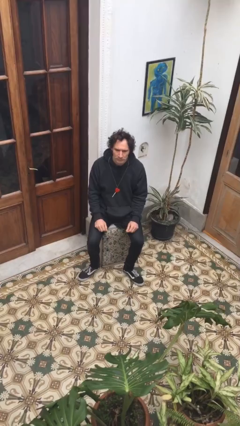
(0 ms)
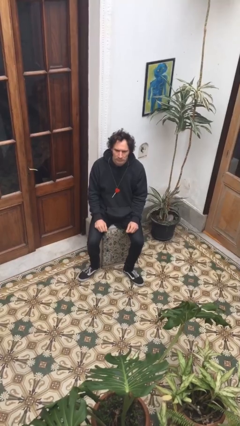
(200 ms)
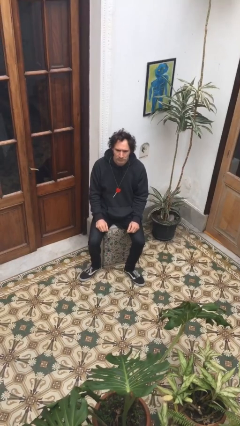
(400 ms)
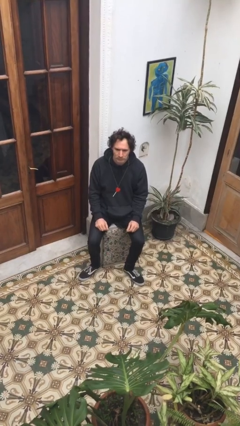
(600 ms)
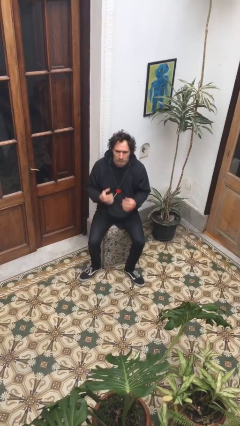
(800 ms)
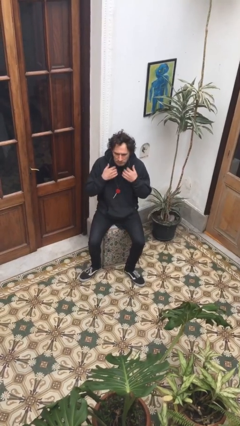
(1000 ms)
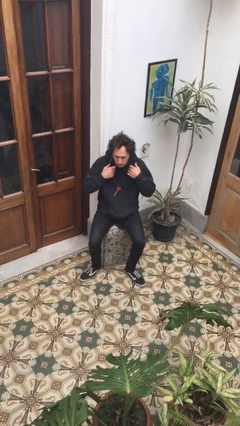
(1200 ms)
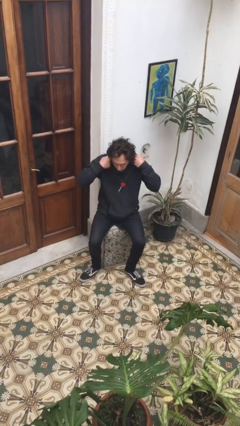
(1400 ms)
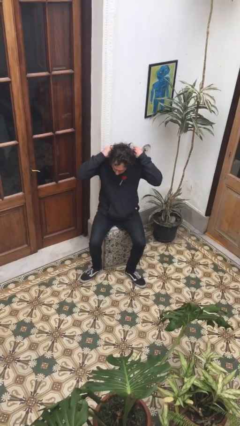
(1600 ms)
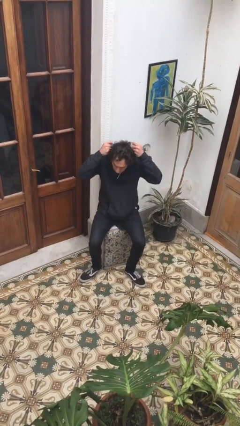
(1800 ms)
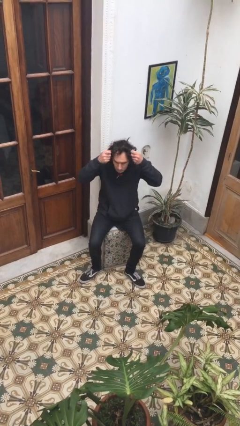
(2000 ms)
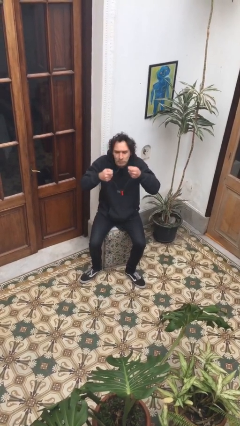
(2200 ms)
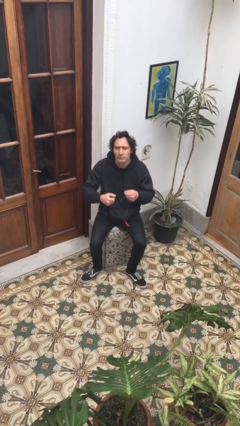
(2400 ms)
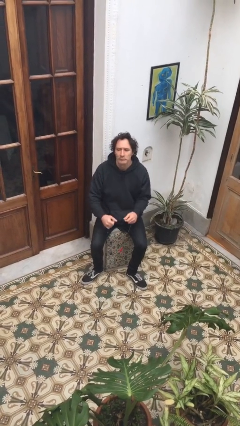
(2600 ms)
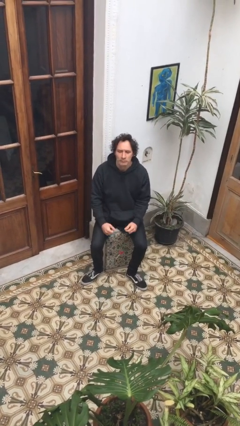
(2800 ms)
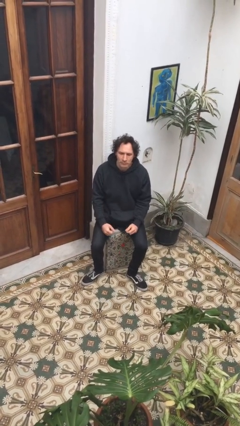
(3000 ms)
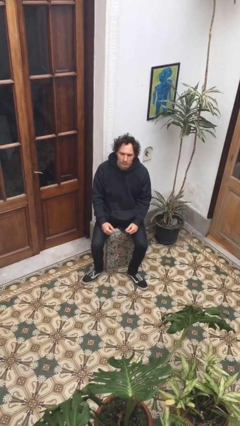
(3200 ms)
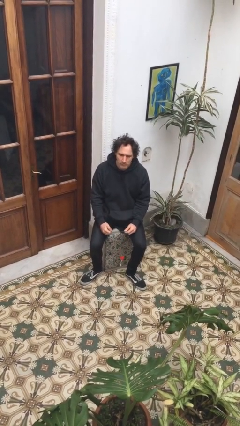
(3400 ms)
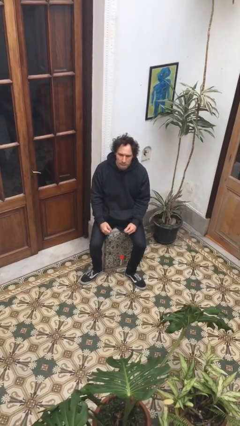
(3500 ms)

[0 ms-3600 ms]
person takes off necklace

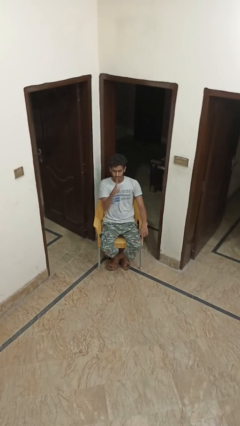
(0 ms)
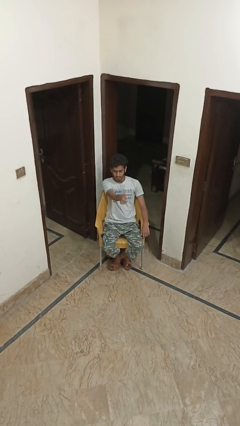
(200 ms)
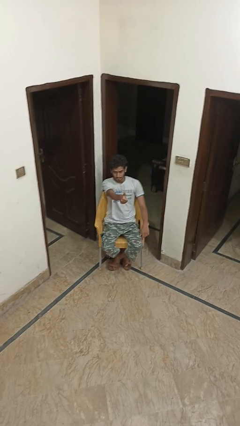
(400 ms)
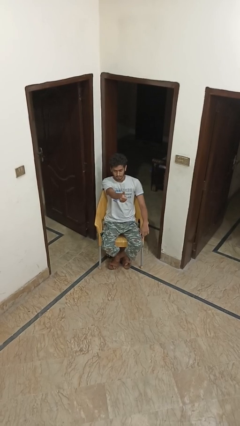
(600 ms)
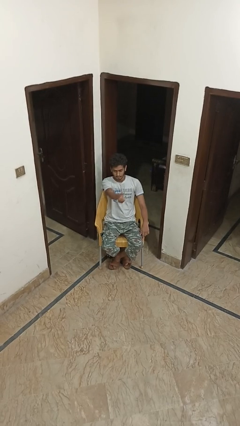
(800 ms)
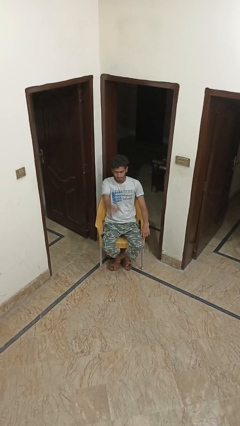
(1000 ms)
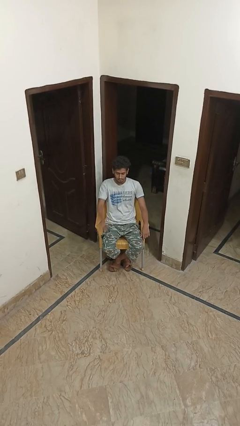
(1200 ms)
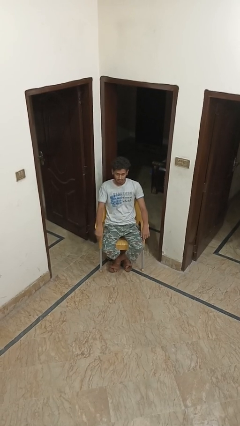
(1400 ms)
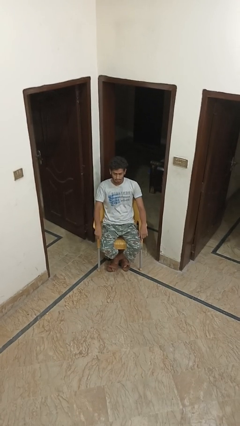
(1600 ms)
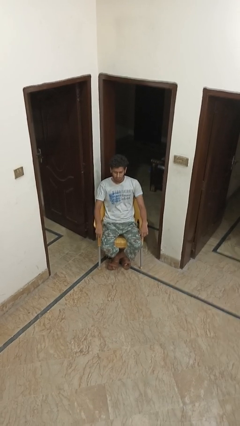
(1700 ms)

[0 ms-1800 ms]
person gestures thumbs up

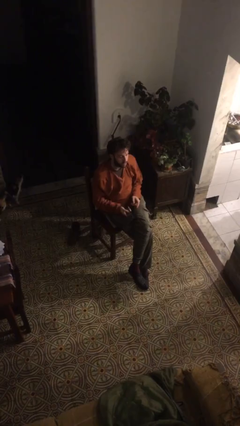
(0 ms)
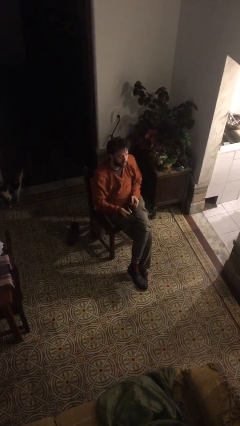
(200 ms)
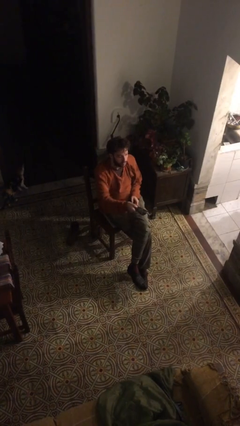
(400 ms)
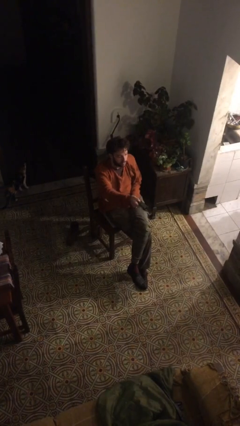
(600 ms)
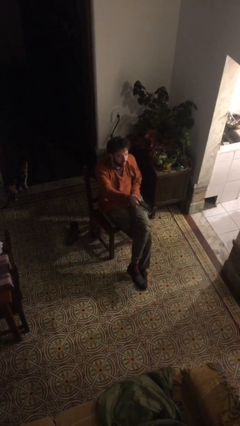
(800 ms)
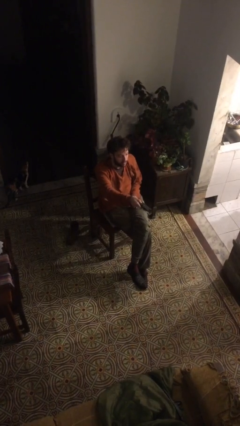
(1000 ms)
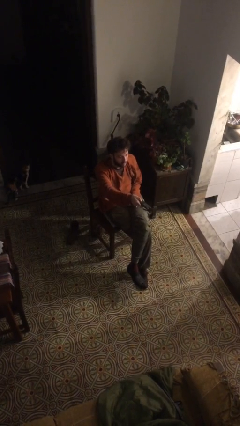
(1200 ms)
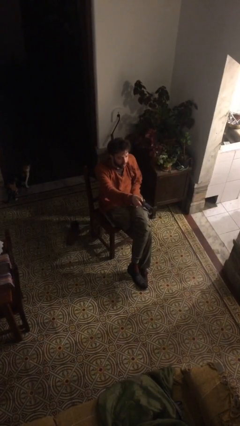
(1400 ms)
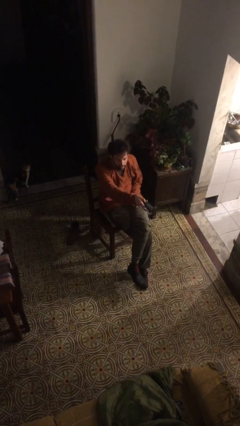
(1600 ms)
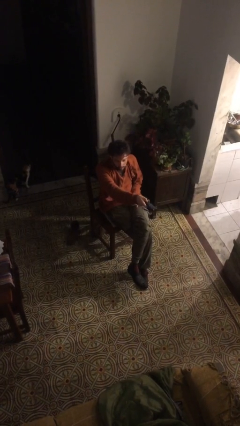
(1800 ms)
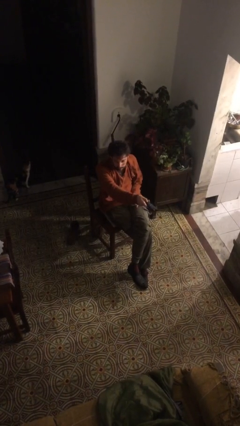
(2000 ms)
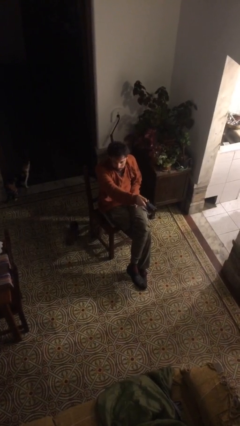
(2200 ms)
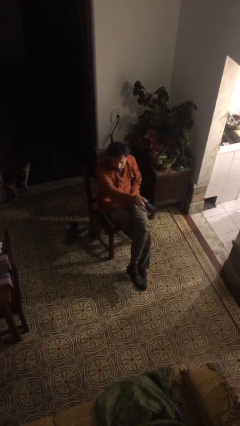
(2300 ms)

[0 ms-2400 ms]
person uses television remote

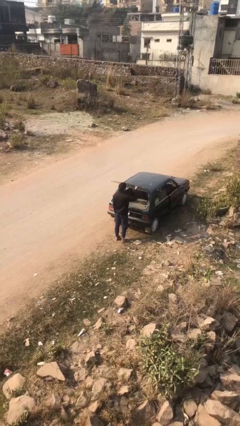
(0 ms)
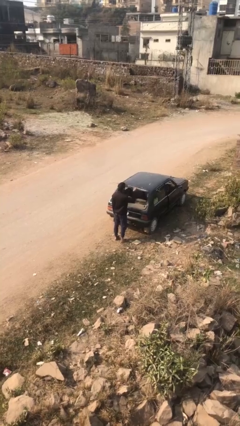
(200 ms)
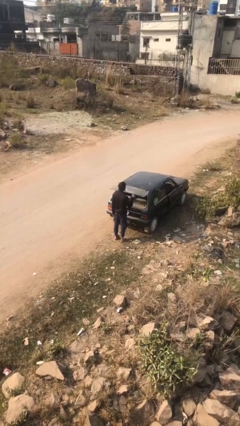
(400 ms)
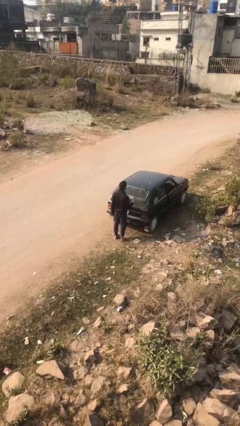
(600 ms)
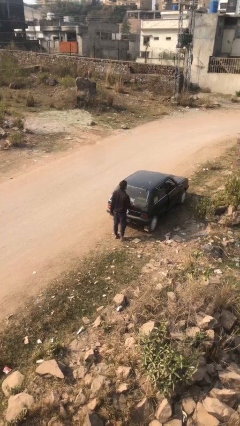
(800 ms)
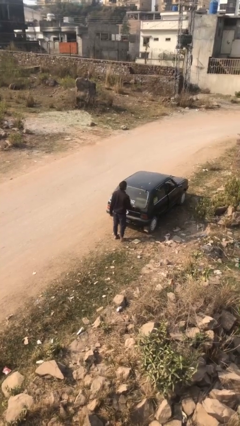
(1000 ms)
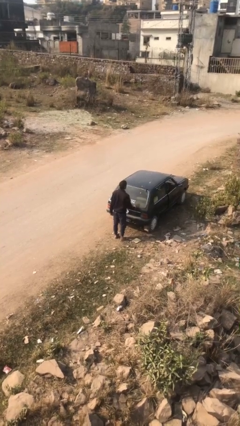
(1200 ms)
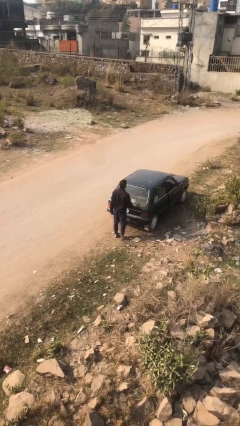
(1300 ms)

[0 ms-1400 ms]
person closes car trunk

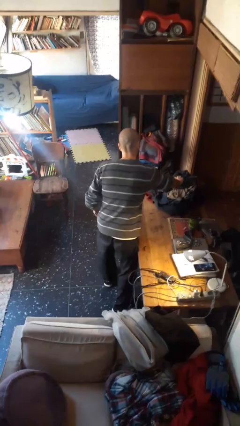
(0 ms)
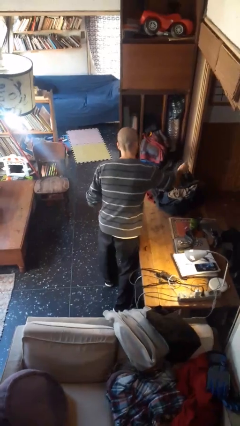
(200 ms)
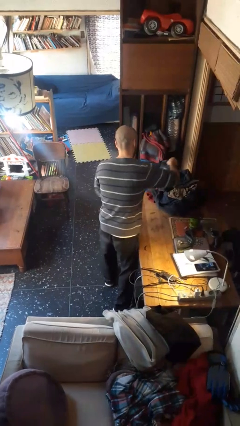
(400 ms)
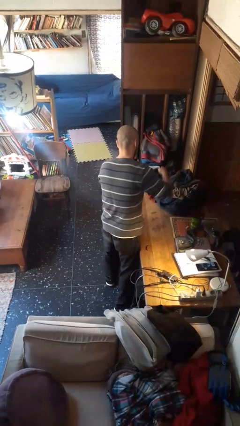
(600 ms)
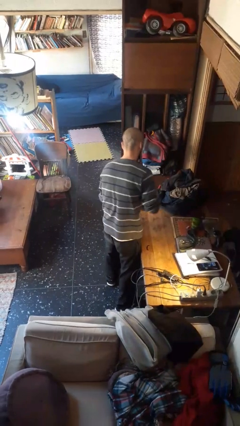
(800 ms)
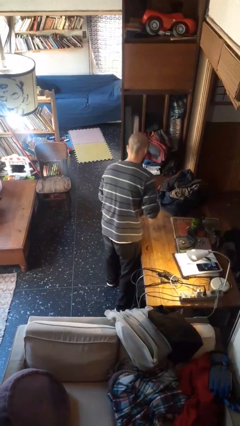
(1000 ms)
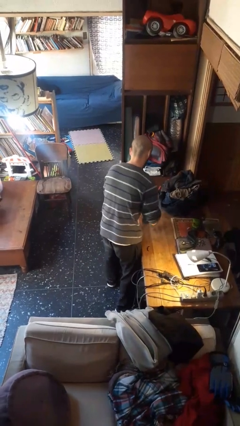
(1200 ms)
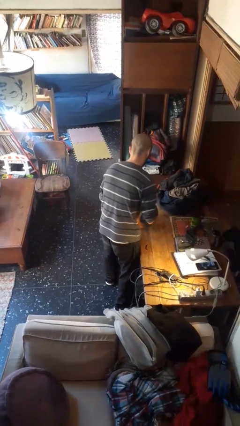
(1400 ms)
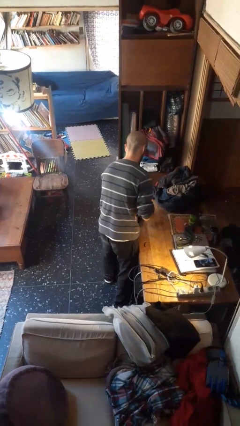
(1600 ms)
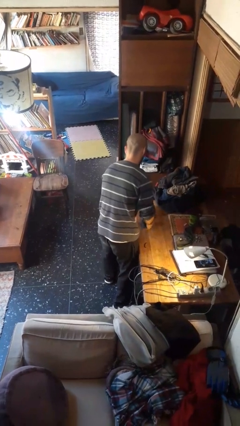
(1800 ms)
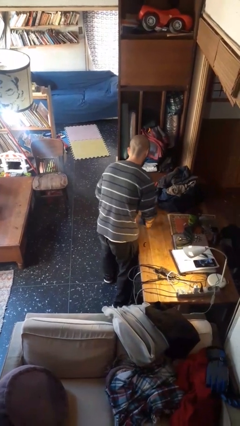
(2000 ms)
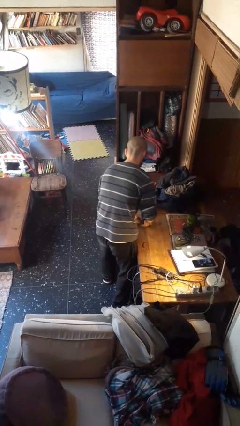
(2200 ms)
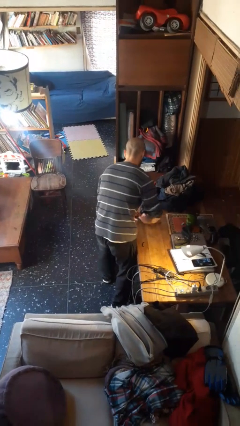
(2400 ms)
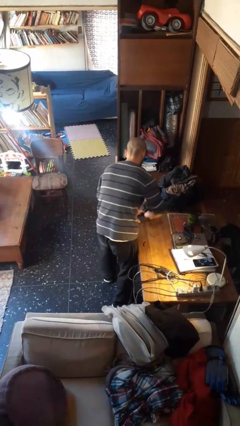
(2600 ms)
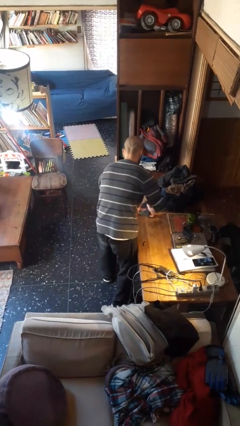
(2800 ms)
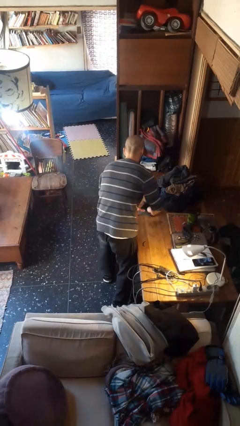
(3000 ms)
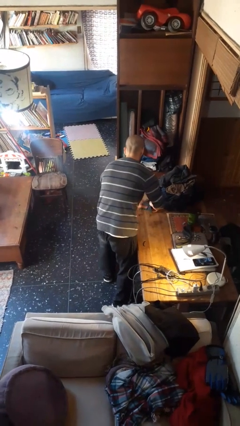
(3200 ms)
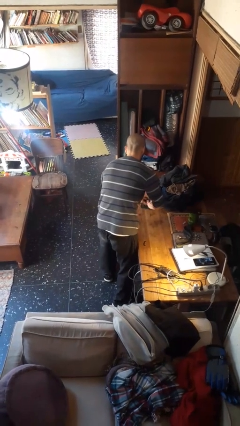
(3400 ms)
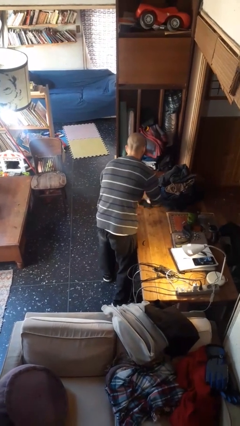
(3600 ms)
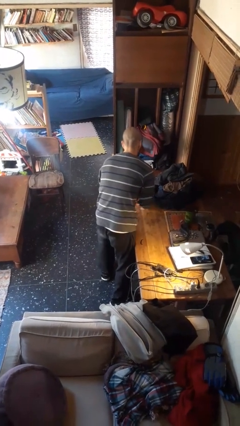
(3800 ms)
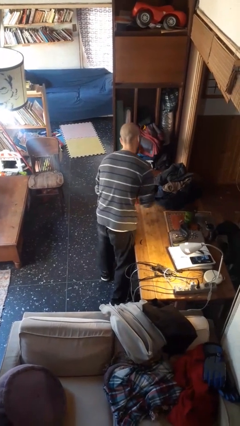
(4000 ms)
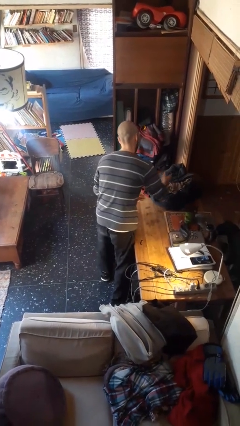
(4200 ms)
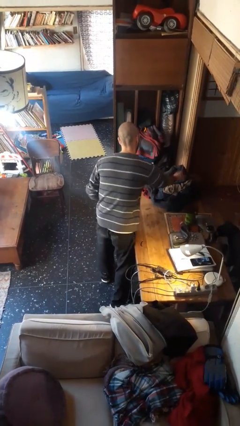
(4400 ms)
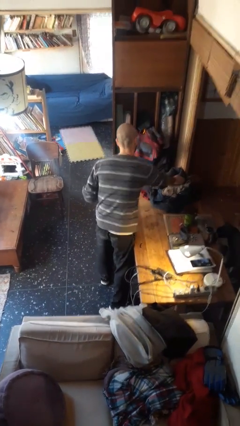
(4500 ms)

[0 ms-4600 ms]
person folds socks

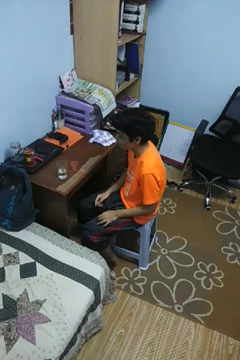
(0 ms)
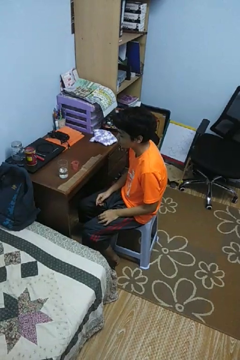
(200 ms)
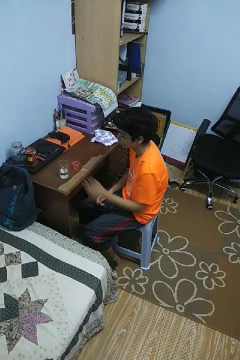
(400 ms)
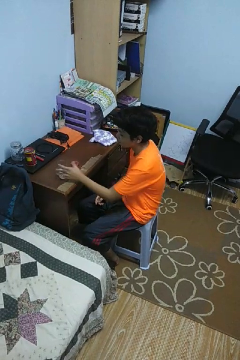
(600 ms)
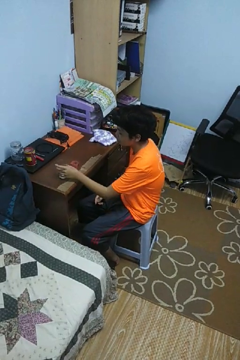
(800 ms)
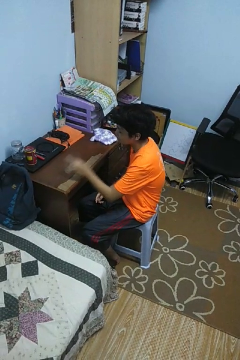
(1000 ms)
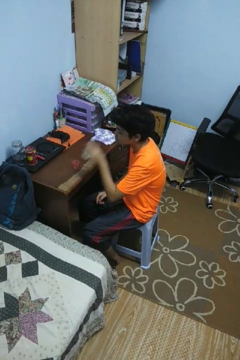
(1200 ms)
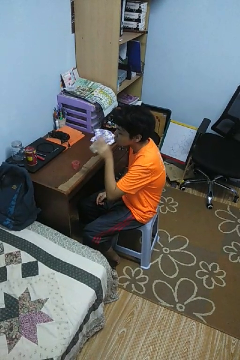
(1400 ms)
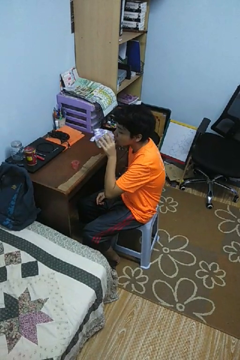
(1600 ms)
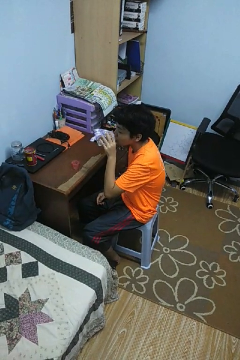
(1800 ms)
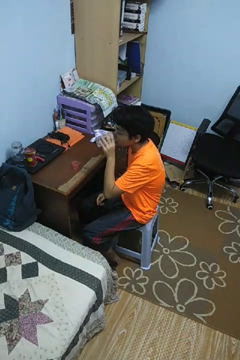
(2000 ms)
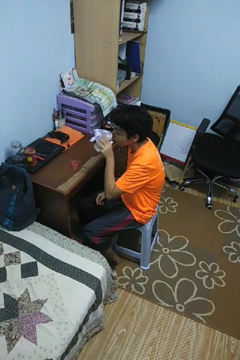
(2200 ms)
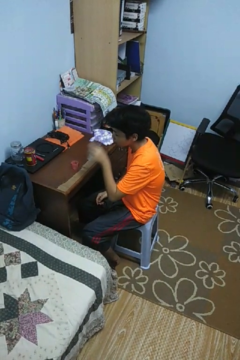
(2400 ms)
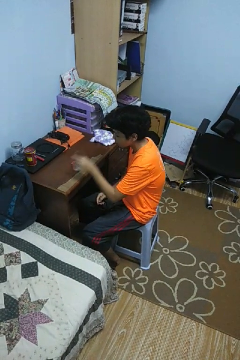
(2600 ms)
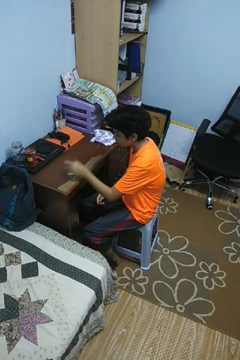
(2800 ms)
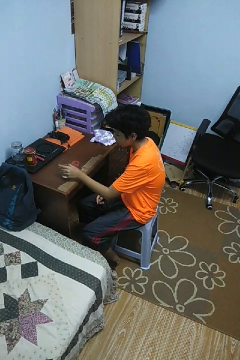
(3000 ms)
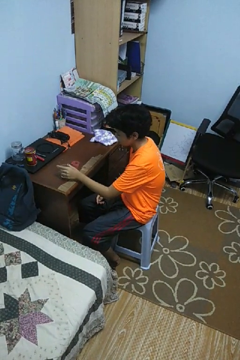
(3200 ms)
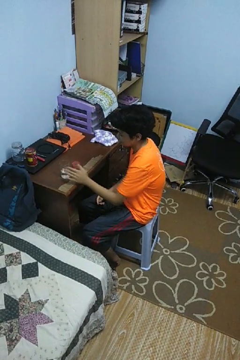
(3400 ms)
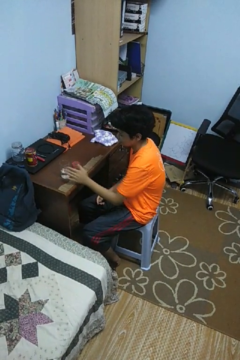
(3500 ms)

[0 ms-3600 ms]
person drinks from cup
